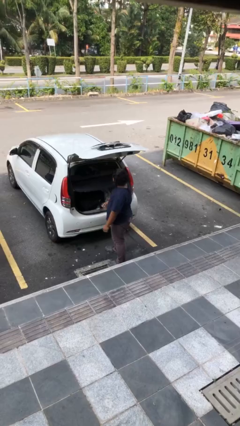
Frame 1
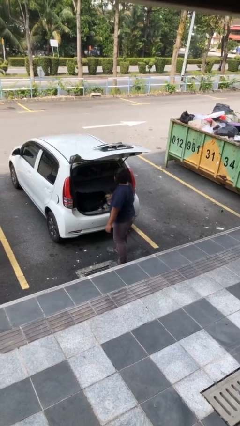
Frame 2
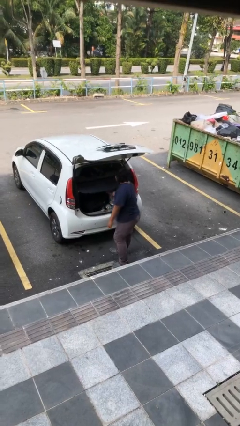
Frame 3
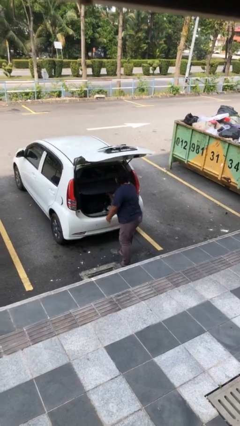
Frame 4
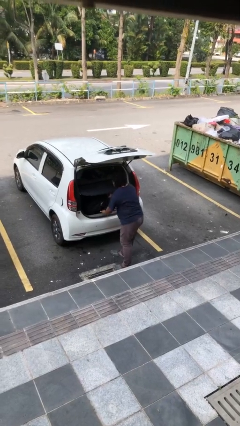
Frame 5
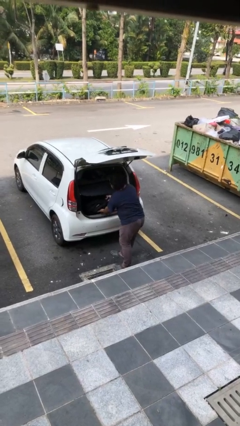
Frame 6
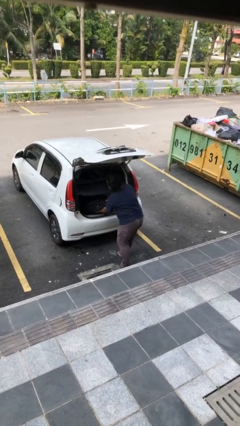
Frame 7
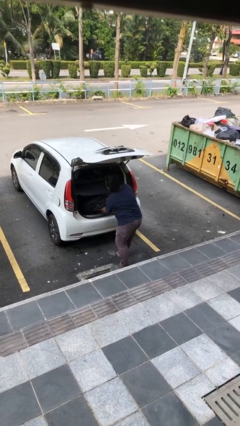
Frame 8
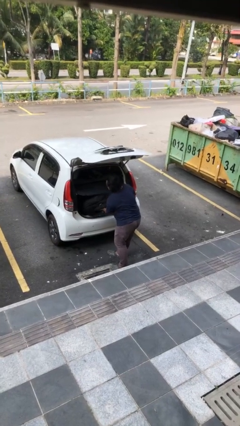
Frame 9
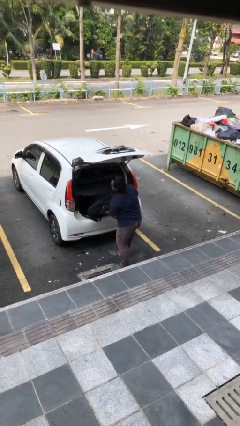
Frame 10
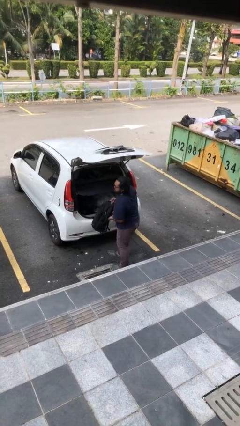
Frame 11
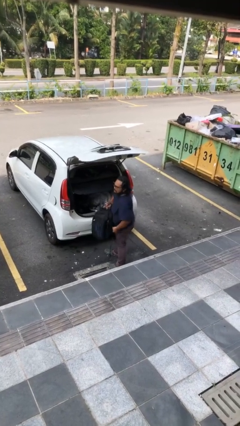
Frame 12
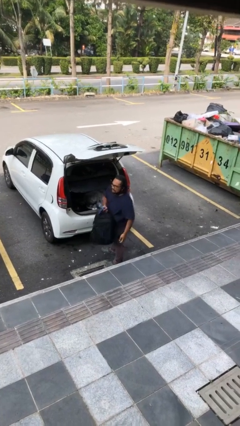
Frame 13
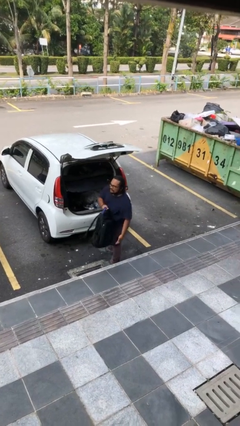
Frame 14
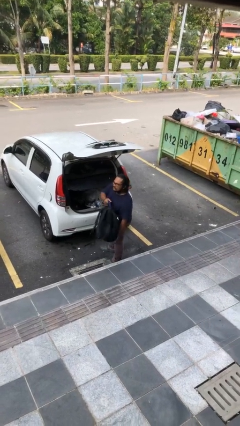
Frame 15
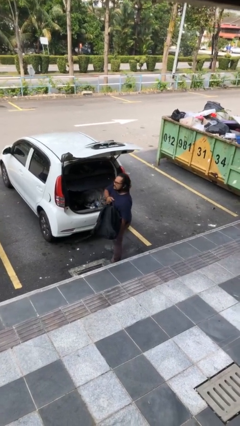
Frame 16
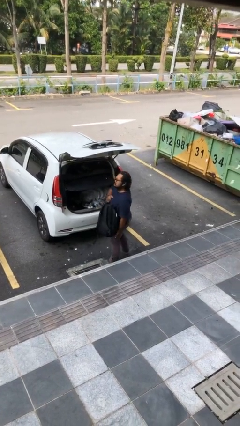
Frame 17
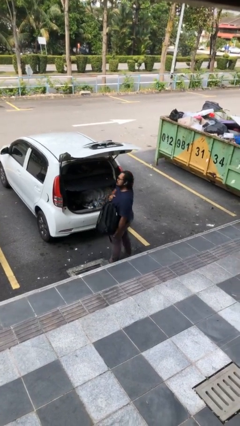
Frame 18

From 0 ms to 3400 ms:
person unloads car

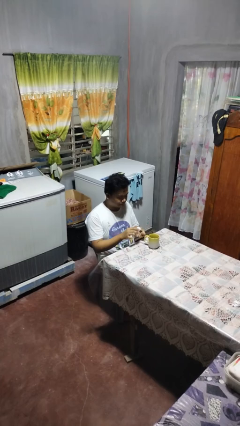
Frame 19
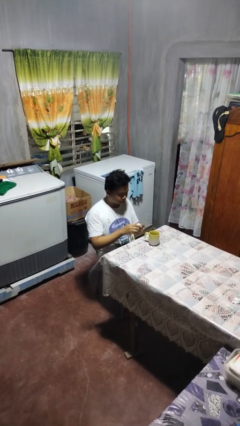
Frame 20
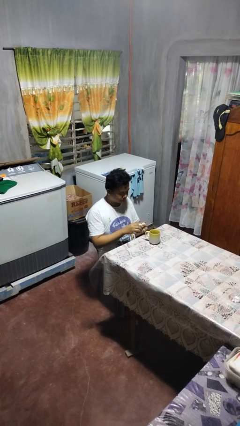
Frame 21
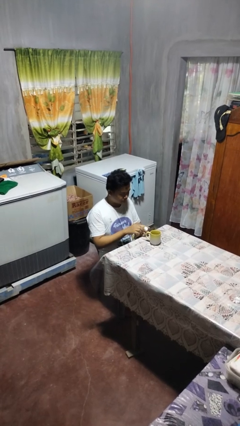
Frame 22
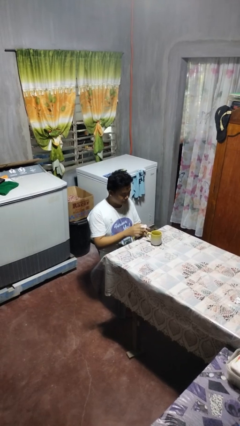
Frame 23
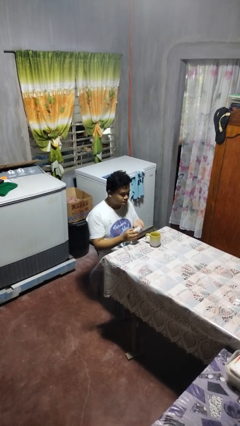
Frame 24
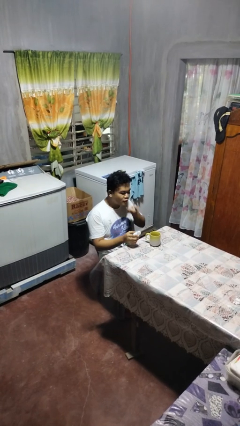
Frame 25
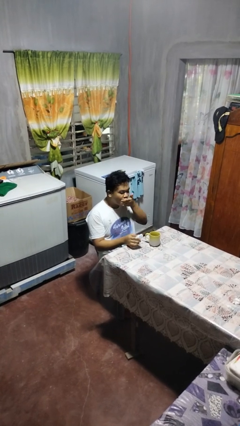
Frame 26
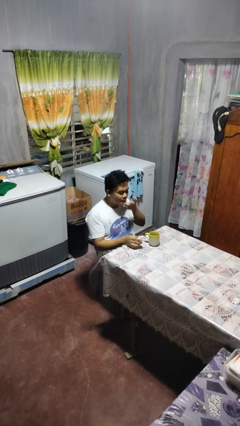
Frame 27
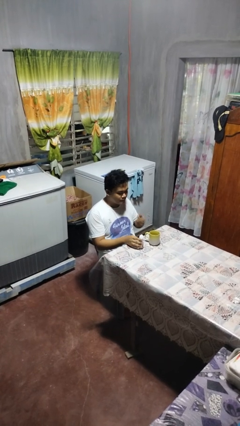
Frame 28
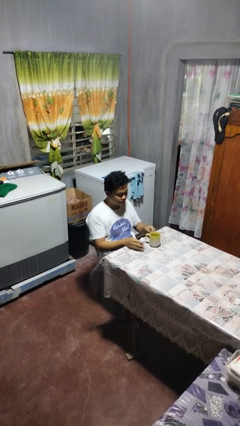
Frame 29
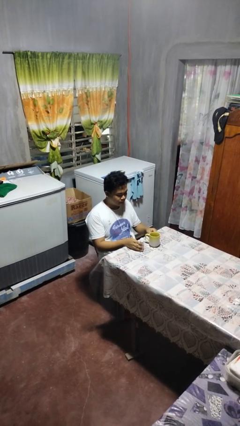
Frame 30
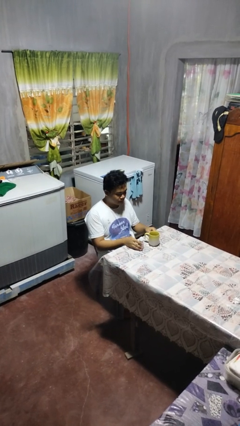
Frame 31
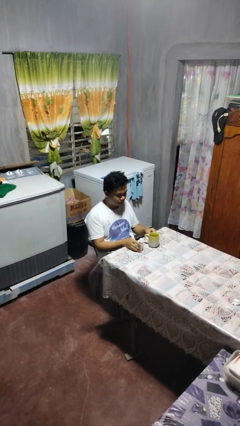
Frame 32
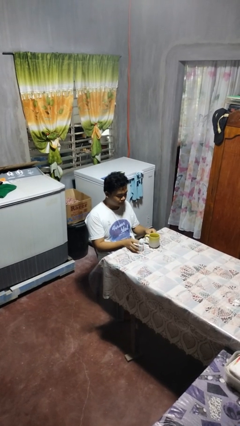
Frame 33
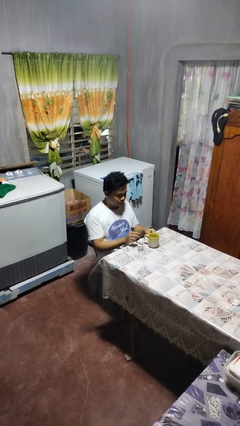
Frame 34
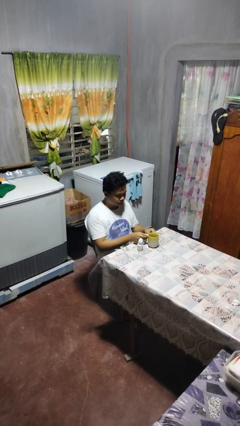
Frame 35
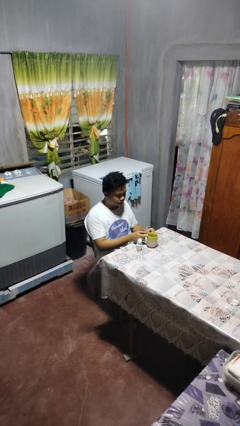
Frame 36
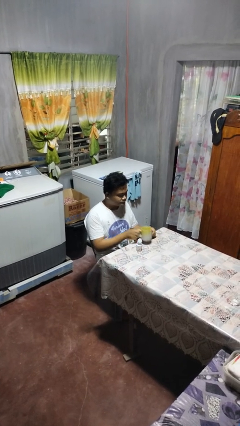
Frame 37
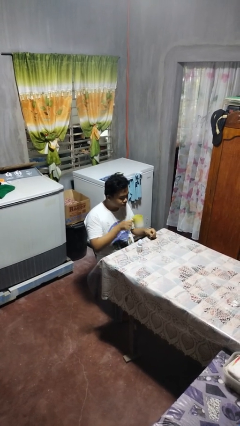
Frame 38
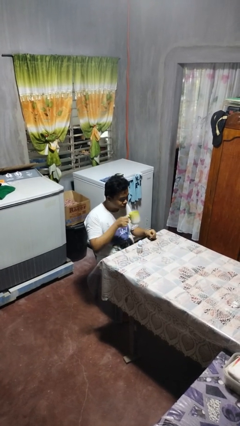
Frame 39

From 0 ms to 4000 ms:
person takes medicine pills

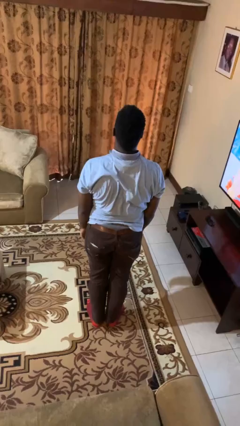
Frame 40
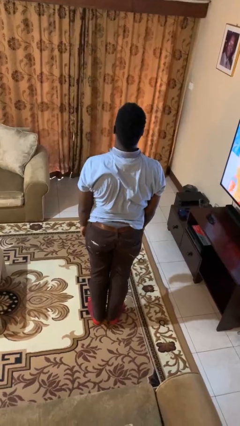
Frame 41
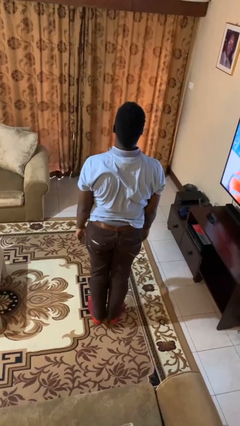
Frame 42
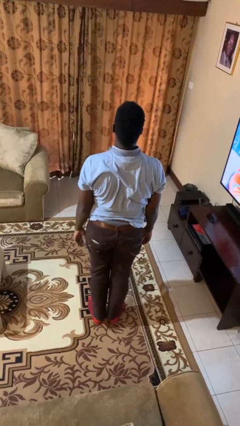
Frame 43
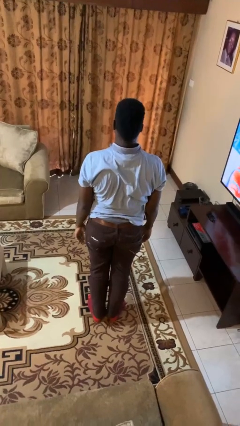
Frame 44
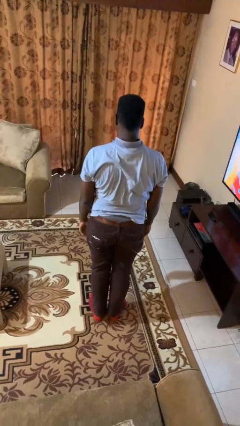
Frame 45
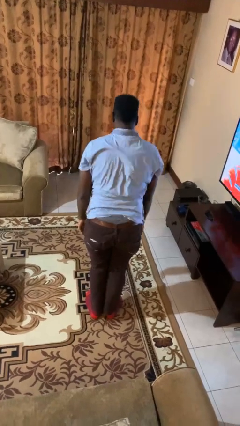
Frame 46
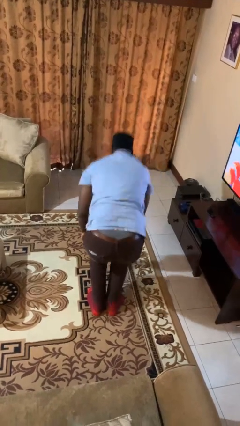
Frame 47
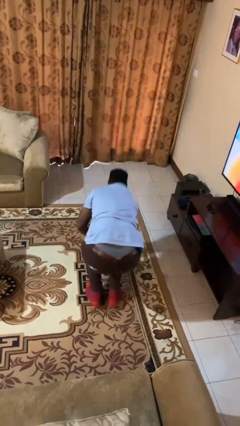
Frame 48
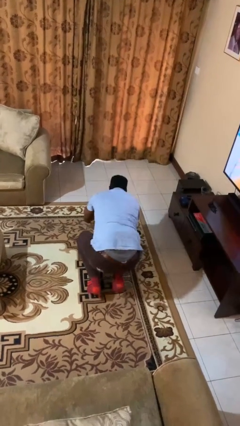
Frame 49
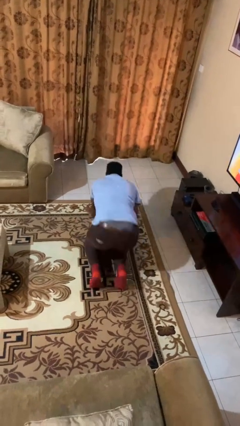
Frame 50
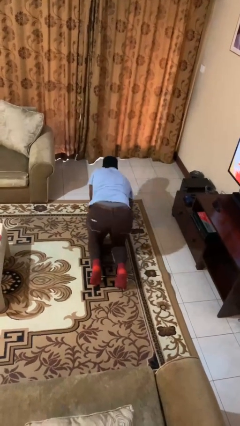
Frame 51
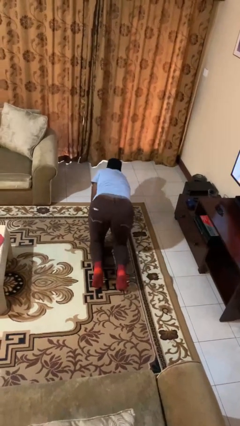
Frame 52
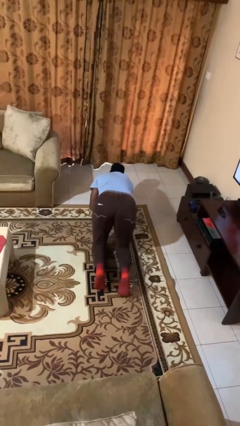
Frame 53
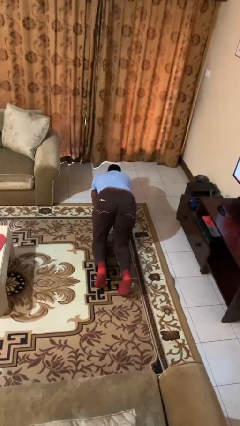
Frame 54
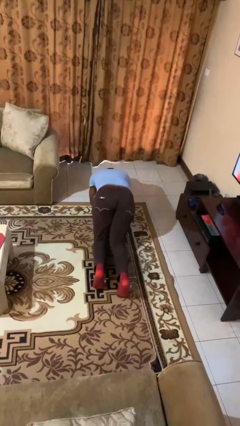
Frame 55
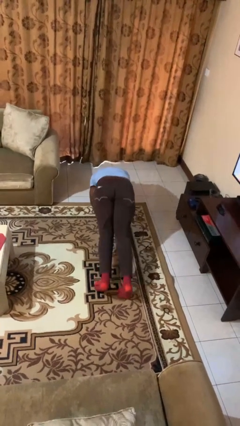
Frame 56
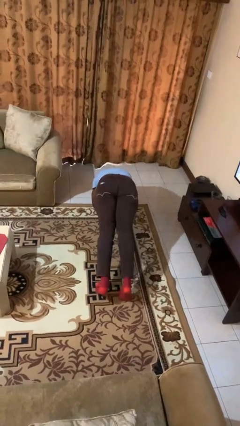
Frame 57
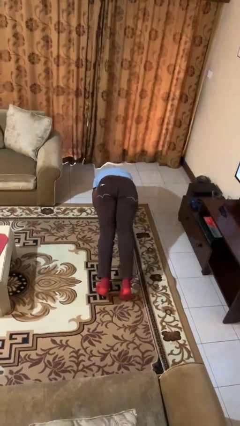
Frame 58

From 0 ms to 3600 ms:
person exercises with plank

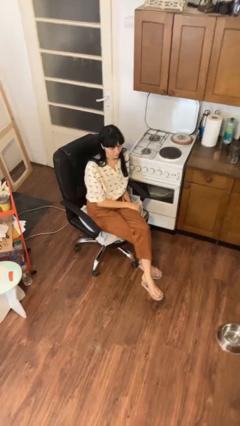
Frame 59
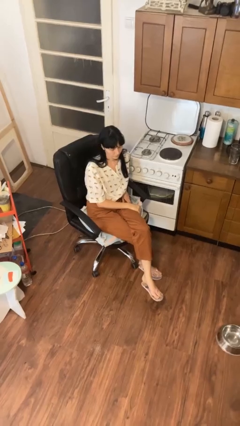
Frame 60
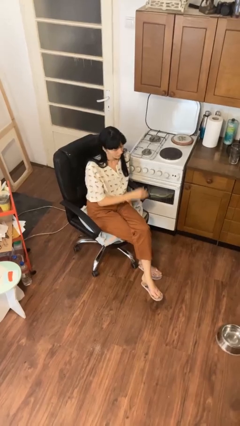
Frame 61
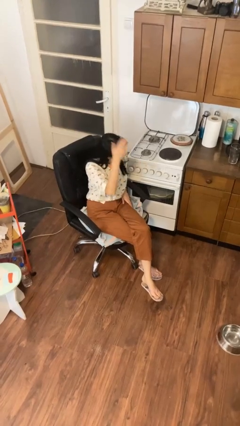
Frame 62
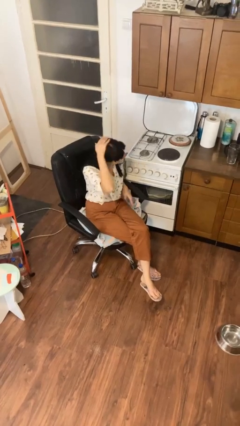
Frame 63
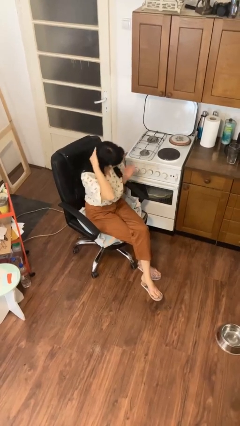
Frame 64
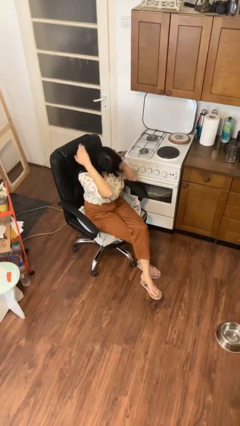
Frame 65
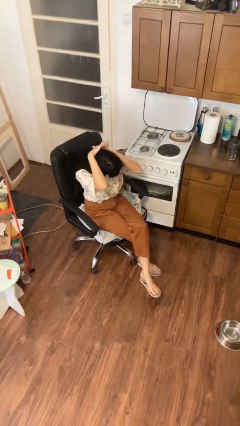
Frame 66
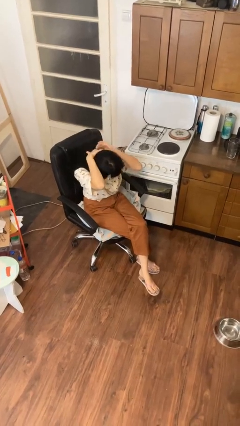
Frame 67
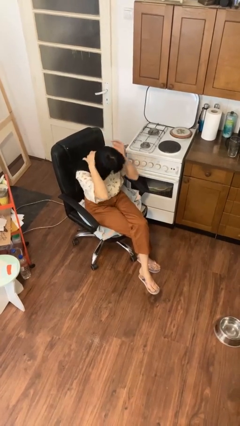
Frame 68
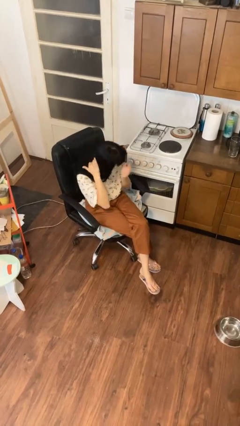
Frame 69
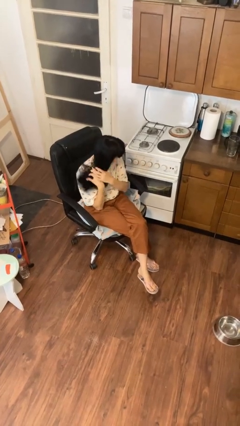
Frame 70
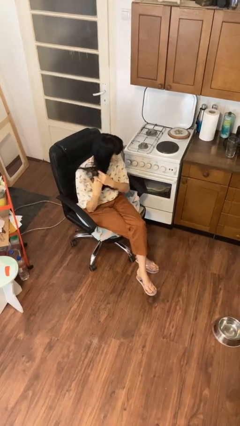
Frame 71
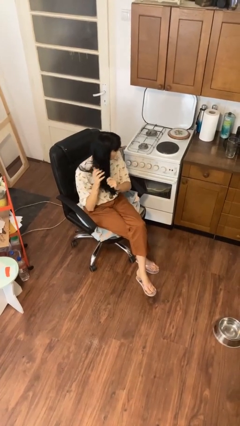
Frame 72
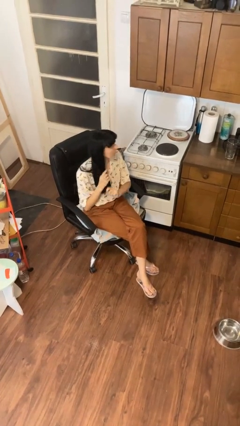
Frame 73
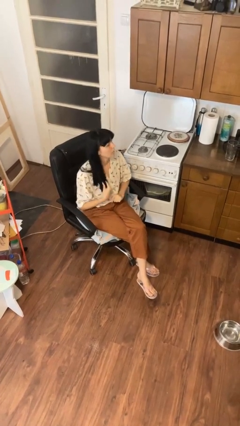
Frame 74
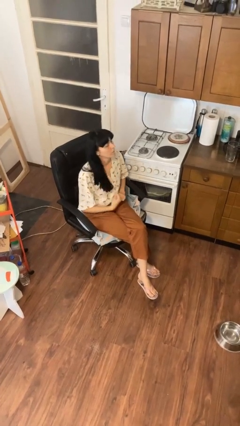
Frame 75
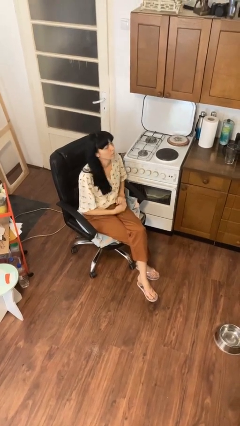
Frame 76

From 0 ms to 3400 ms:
person strokes hair

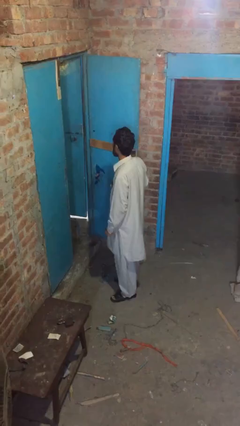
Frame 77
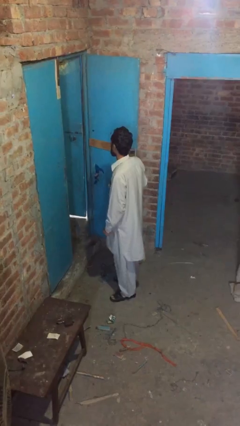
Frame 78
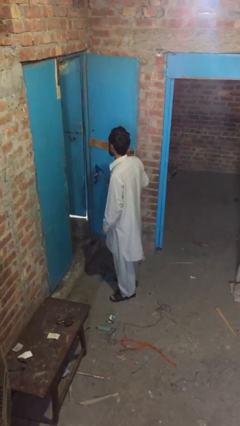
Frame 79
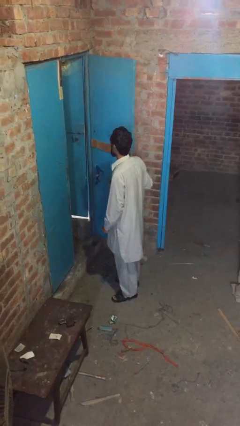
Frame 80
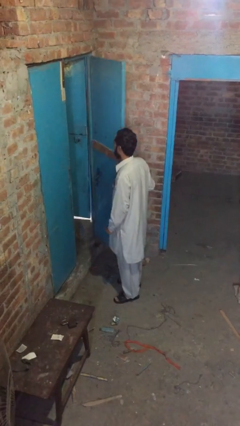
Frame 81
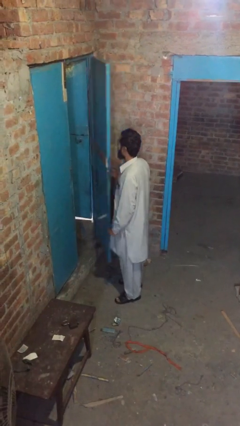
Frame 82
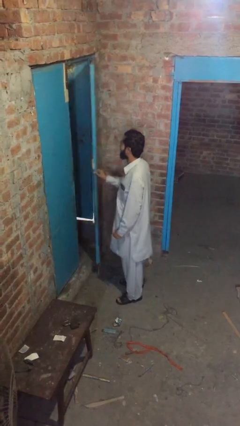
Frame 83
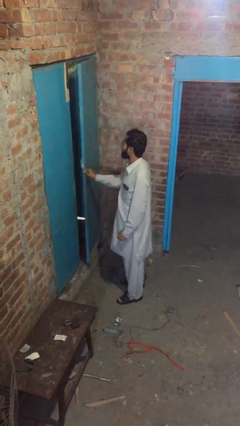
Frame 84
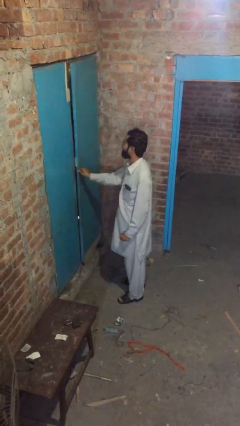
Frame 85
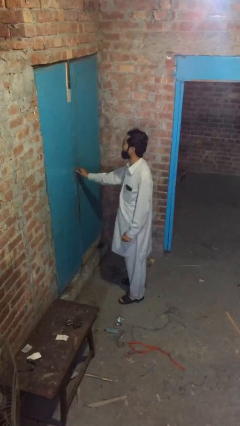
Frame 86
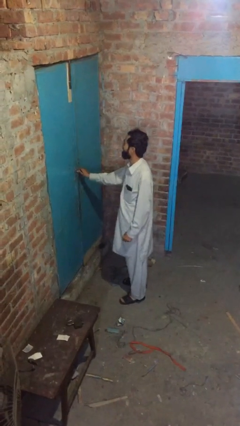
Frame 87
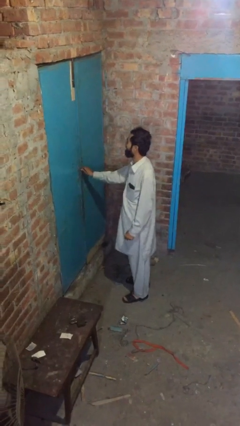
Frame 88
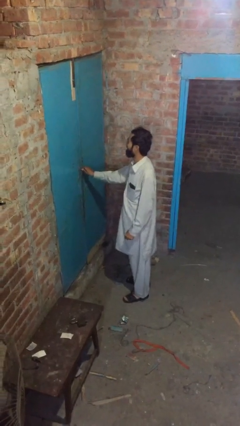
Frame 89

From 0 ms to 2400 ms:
person closes facility door

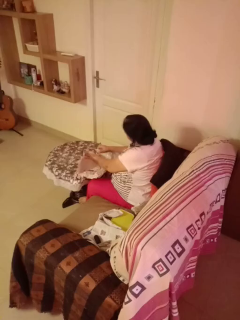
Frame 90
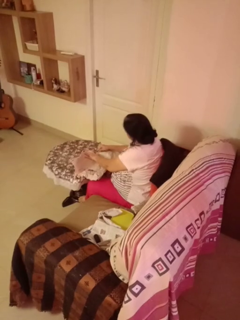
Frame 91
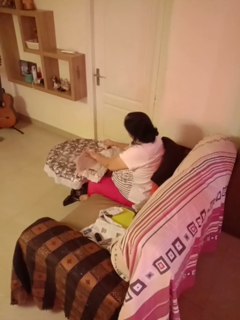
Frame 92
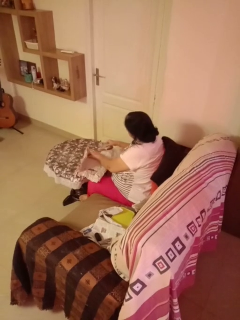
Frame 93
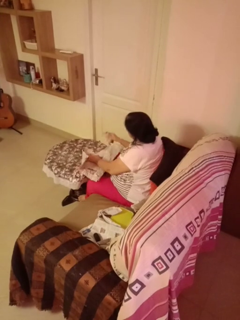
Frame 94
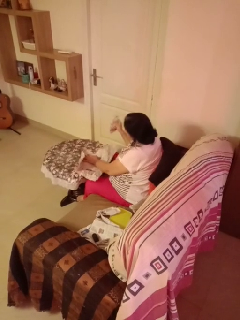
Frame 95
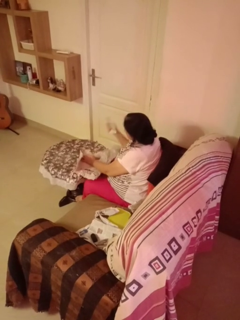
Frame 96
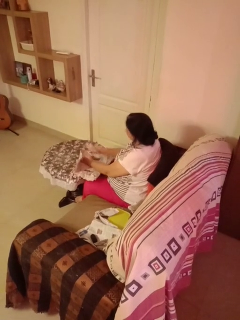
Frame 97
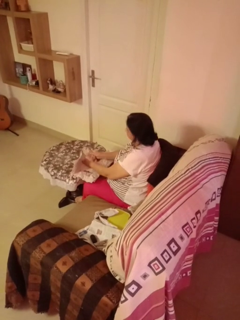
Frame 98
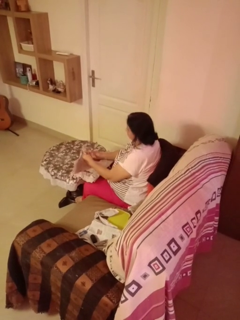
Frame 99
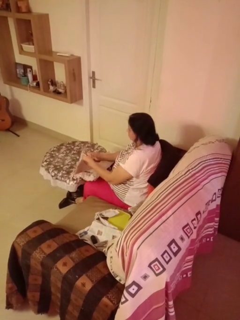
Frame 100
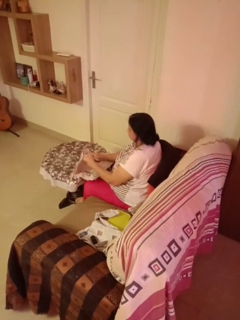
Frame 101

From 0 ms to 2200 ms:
person tears paper
